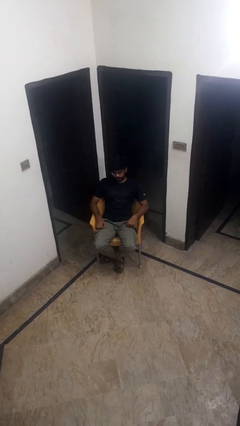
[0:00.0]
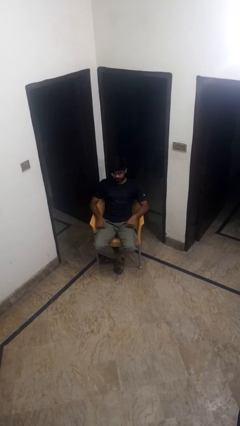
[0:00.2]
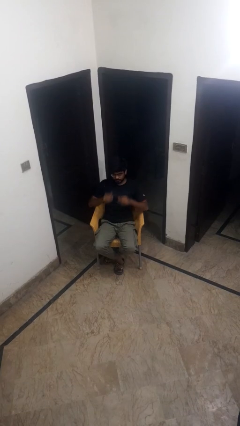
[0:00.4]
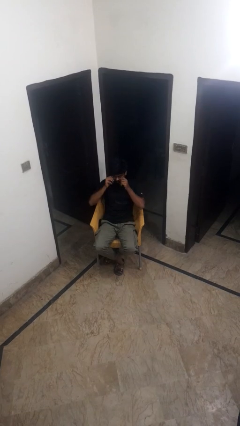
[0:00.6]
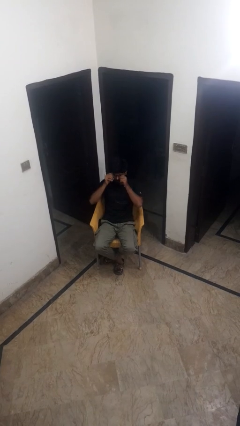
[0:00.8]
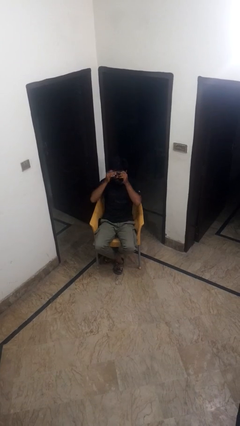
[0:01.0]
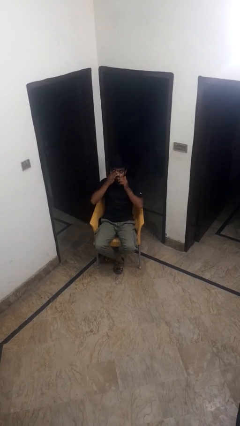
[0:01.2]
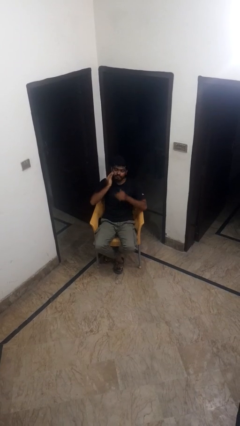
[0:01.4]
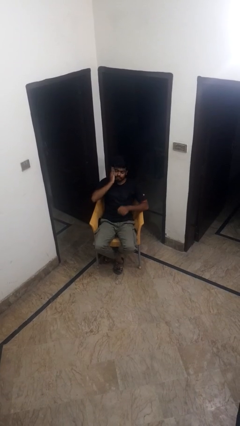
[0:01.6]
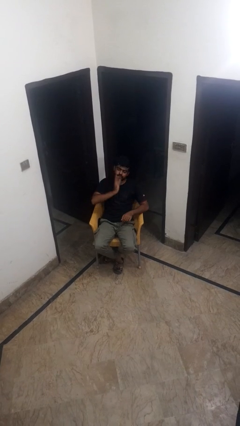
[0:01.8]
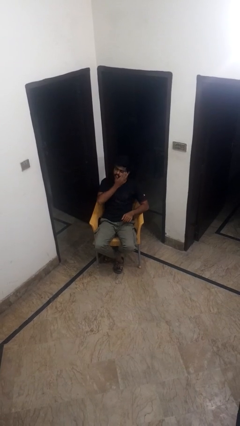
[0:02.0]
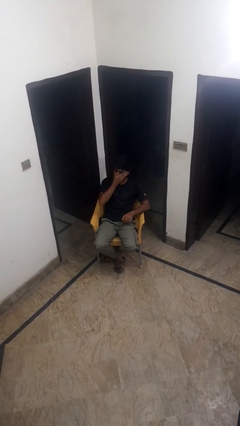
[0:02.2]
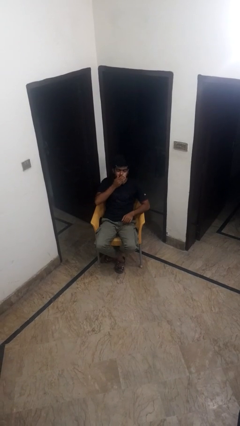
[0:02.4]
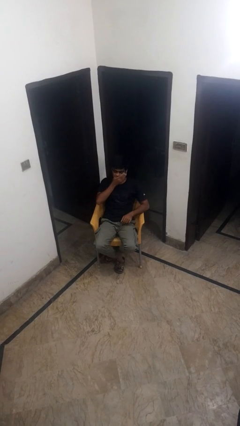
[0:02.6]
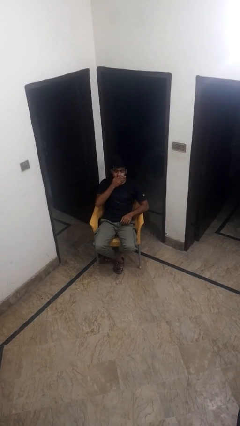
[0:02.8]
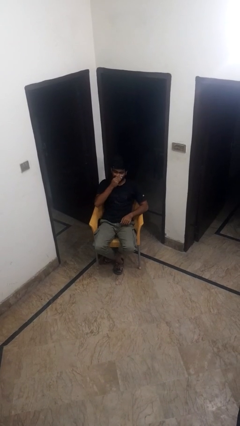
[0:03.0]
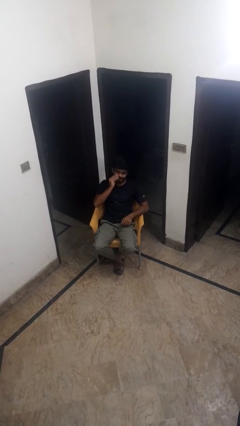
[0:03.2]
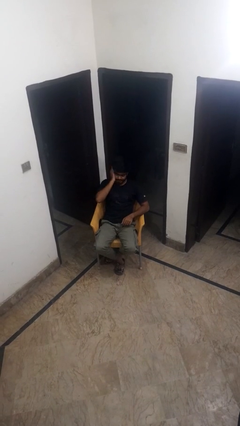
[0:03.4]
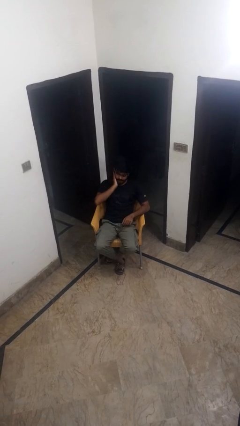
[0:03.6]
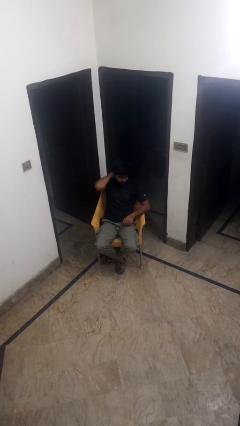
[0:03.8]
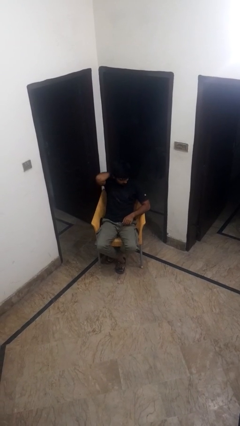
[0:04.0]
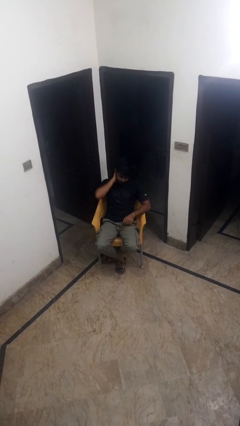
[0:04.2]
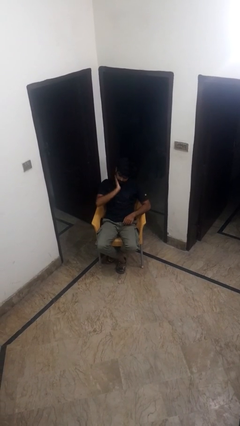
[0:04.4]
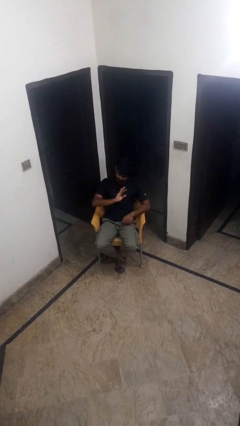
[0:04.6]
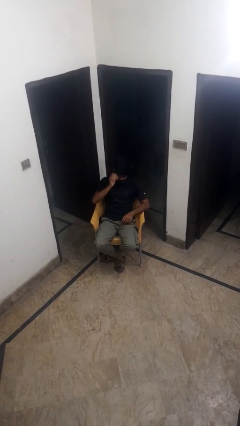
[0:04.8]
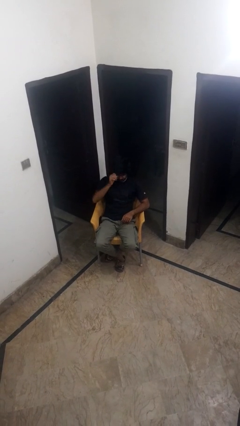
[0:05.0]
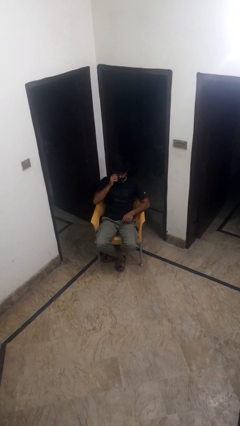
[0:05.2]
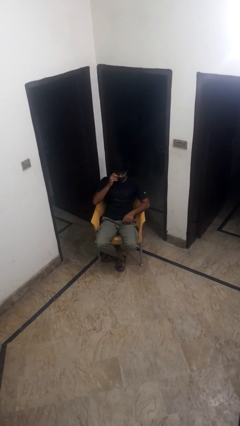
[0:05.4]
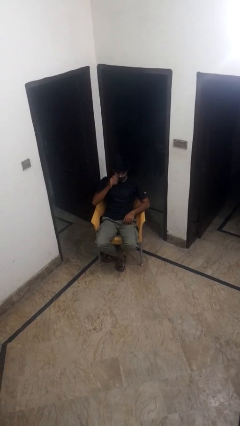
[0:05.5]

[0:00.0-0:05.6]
person scratches face

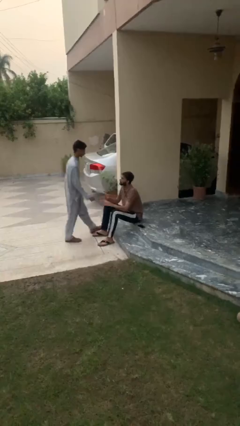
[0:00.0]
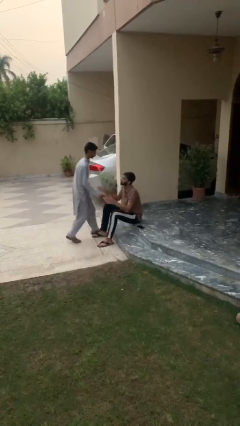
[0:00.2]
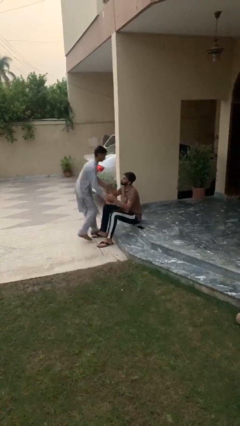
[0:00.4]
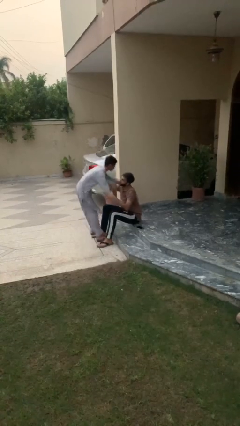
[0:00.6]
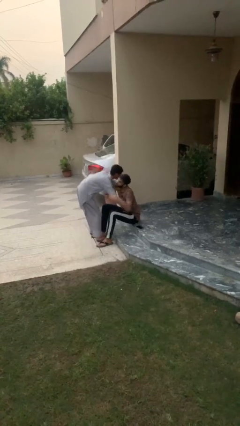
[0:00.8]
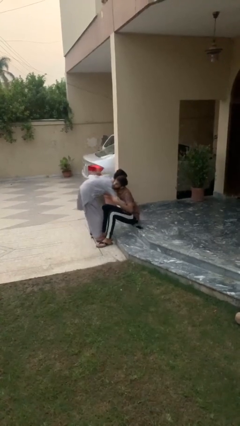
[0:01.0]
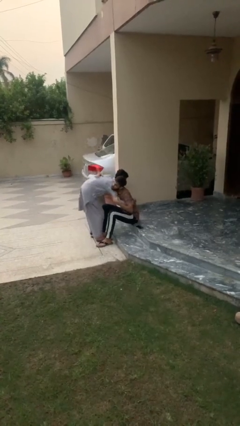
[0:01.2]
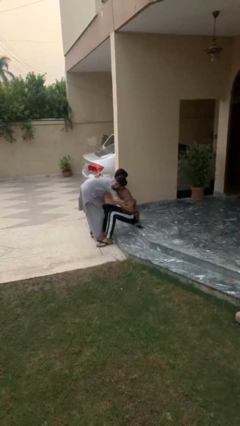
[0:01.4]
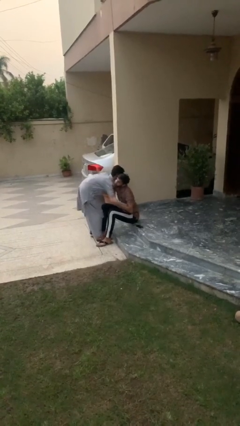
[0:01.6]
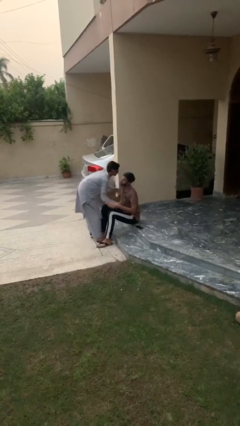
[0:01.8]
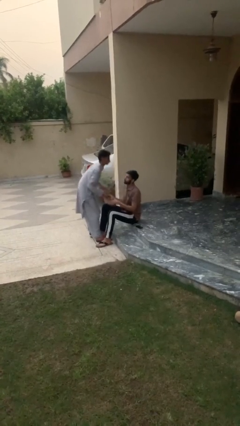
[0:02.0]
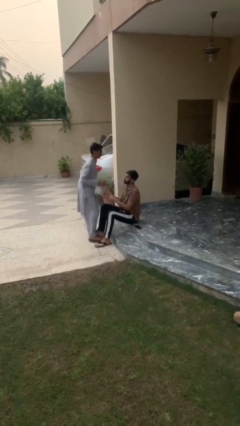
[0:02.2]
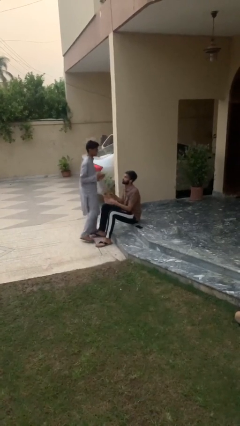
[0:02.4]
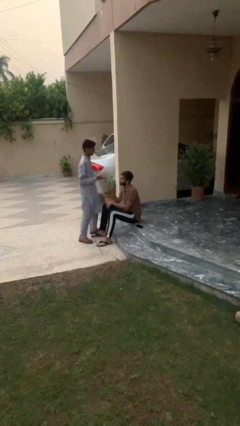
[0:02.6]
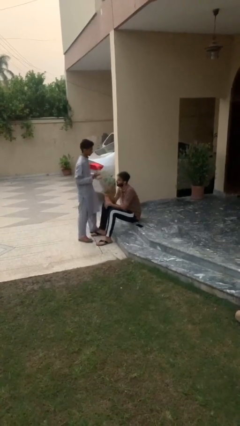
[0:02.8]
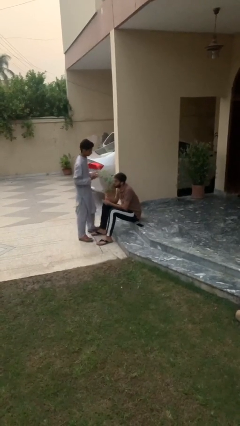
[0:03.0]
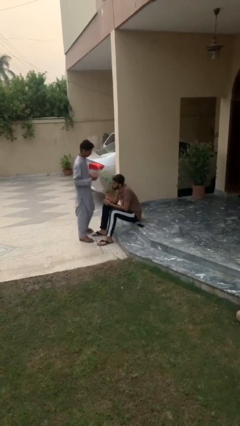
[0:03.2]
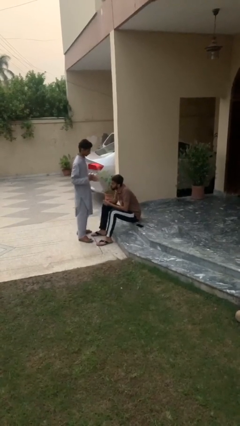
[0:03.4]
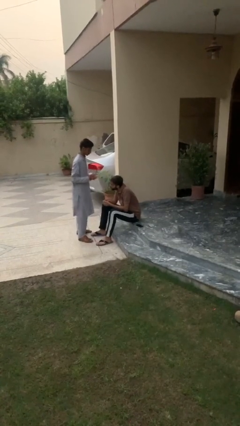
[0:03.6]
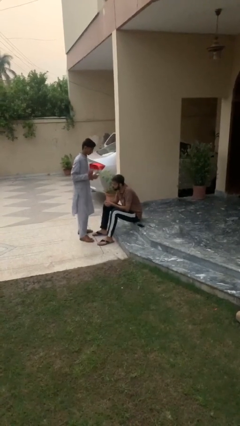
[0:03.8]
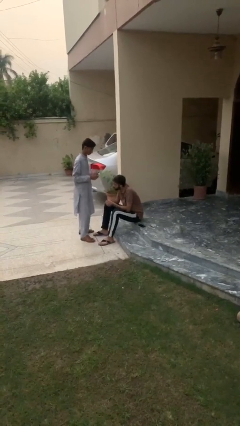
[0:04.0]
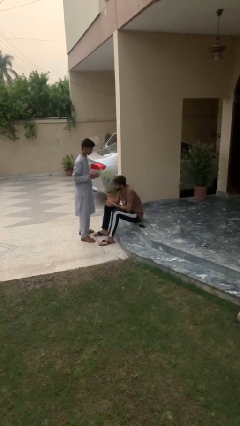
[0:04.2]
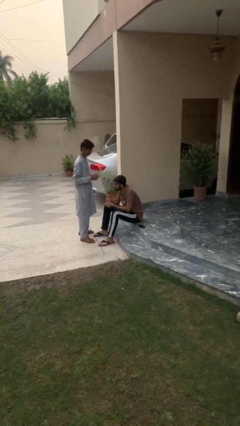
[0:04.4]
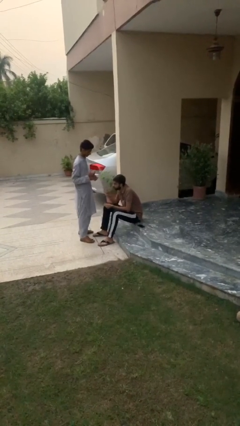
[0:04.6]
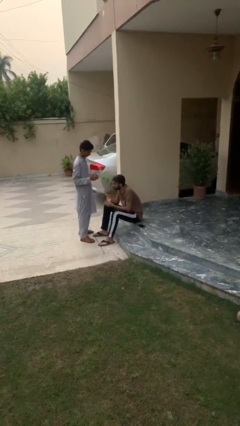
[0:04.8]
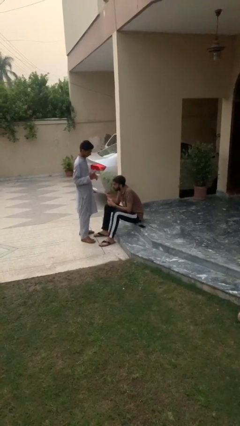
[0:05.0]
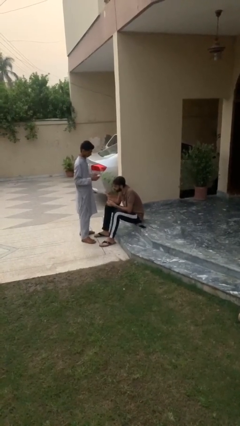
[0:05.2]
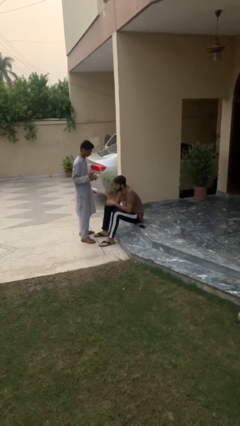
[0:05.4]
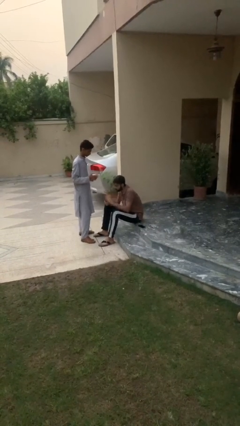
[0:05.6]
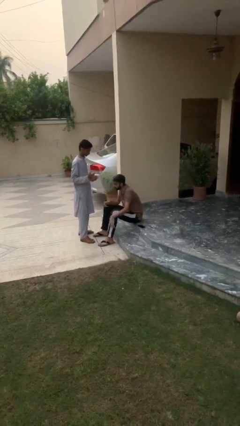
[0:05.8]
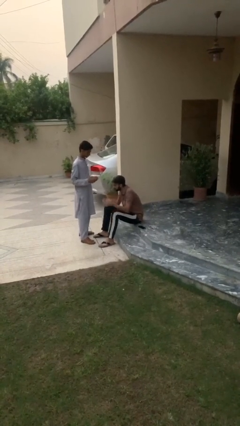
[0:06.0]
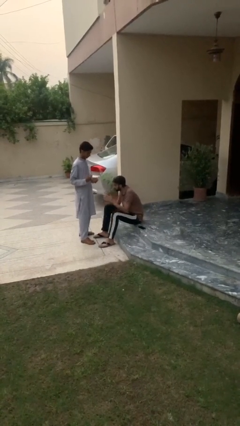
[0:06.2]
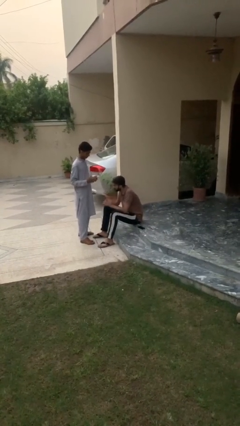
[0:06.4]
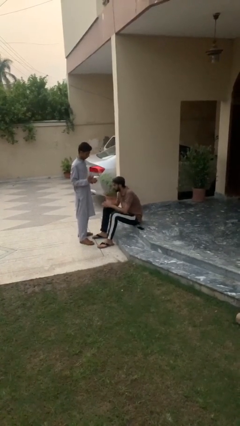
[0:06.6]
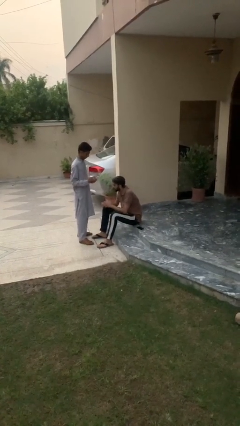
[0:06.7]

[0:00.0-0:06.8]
person embraces person

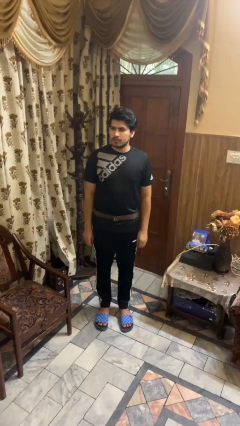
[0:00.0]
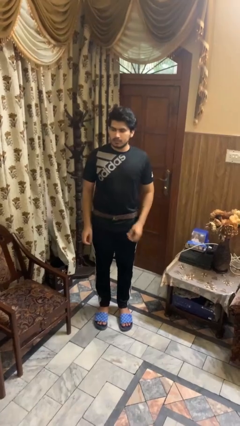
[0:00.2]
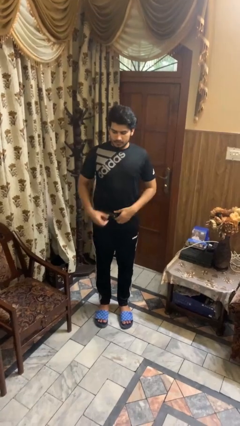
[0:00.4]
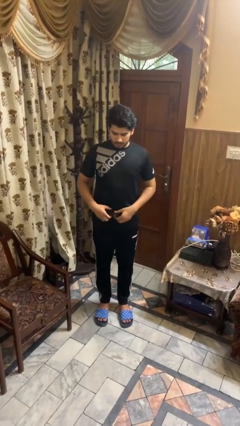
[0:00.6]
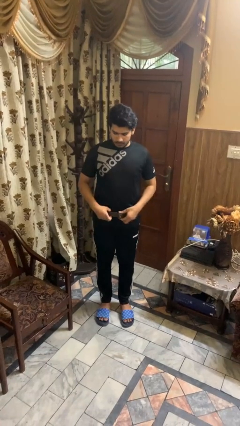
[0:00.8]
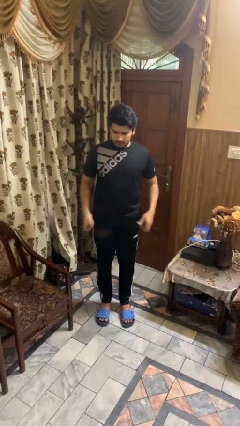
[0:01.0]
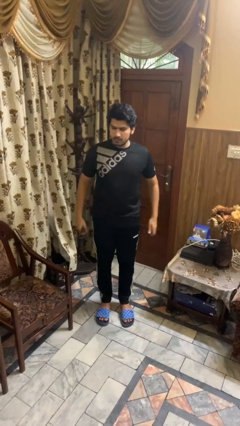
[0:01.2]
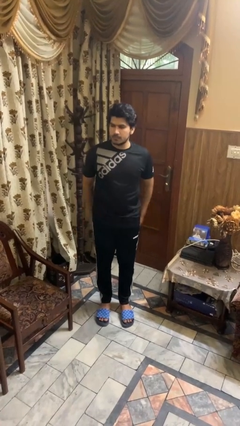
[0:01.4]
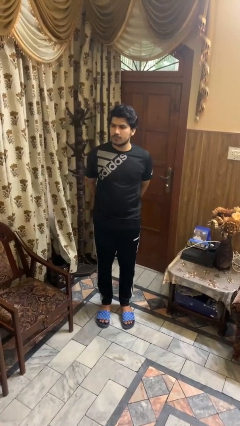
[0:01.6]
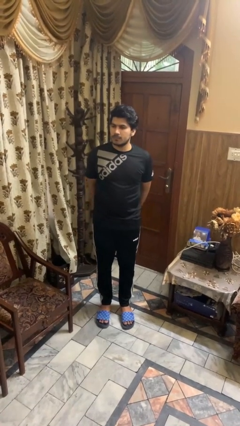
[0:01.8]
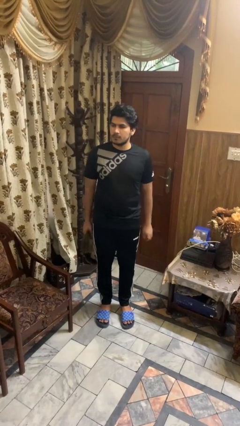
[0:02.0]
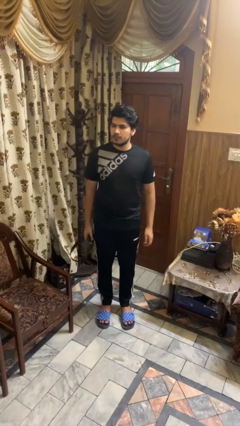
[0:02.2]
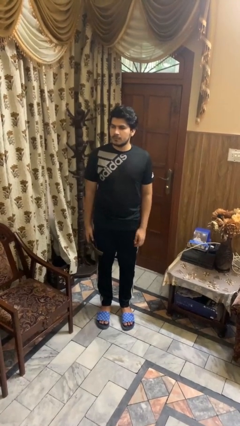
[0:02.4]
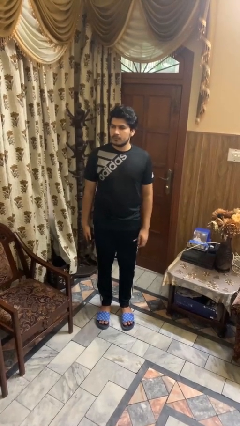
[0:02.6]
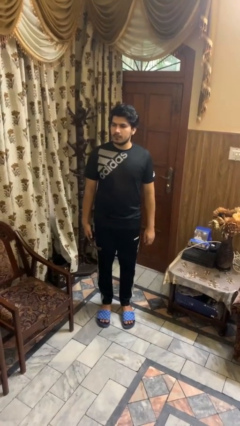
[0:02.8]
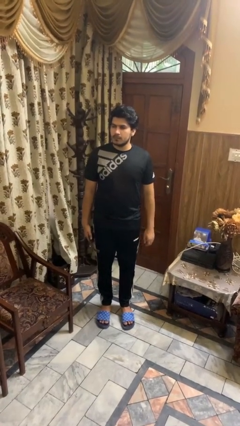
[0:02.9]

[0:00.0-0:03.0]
person takes off belt

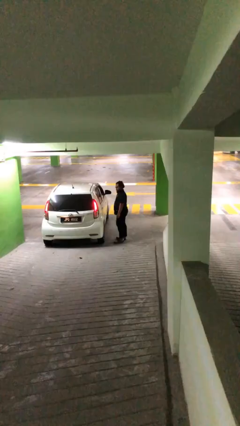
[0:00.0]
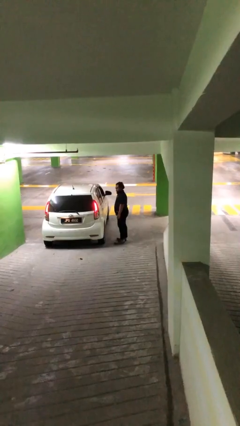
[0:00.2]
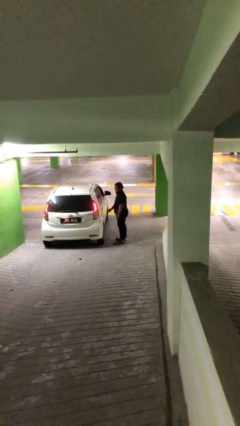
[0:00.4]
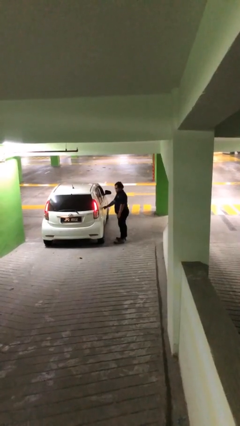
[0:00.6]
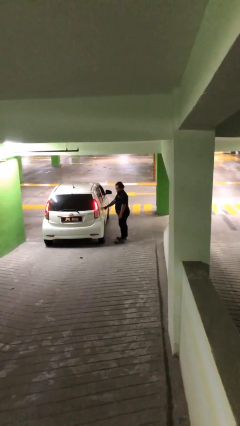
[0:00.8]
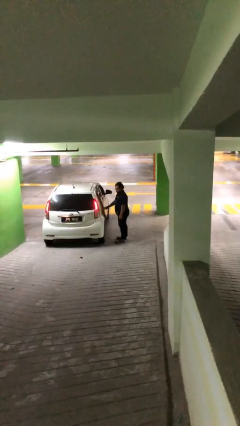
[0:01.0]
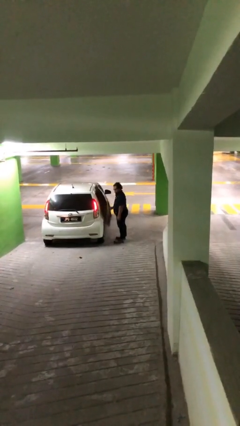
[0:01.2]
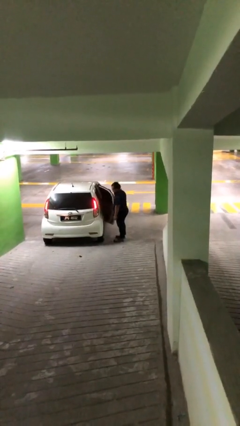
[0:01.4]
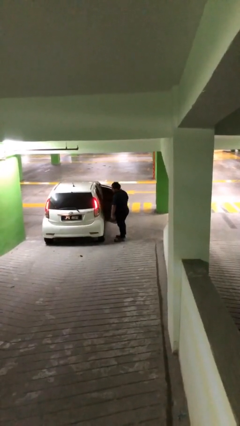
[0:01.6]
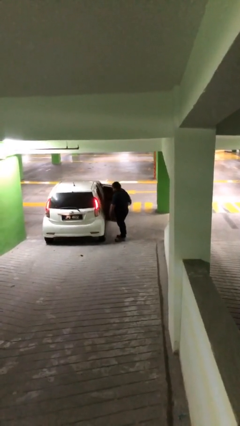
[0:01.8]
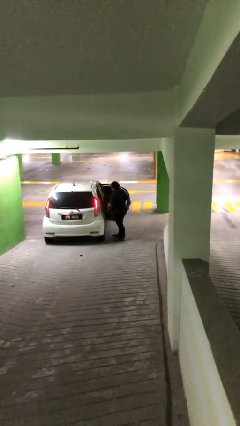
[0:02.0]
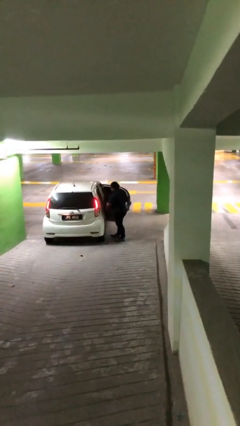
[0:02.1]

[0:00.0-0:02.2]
person opens car door
